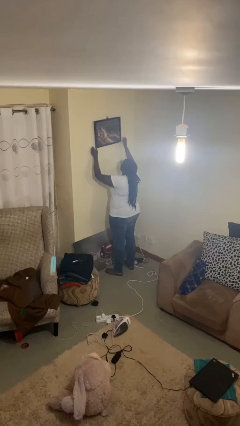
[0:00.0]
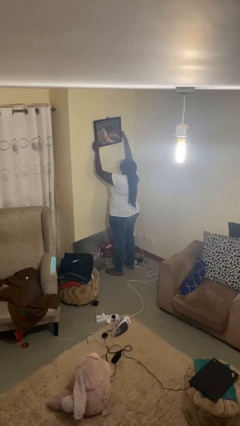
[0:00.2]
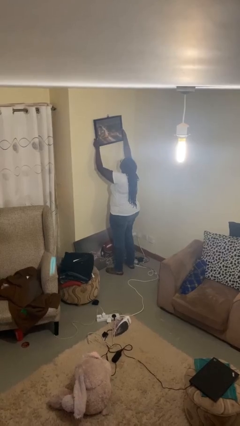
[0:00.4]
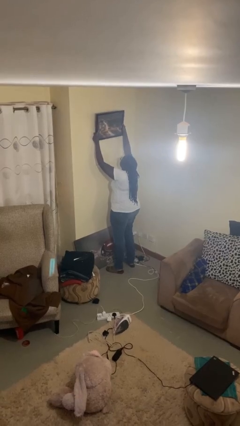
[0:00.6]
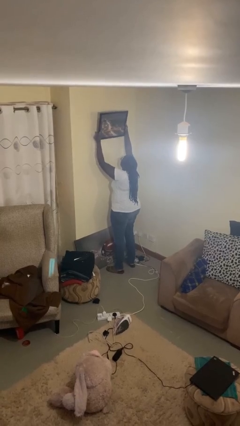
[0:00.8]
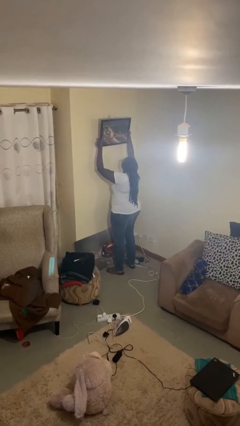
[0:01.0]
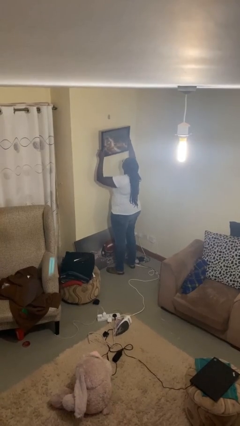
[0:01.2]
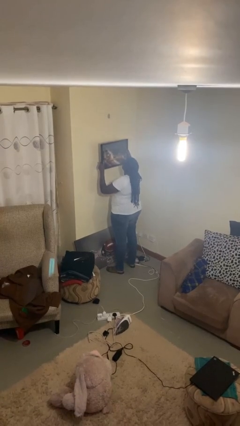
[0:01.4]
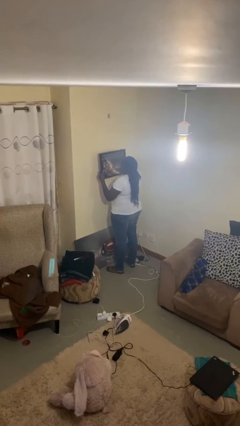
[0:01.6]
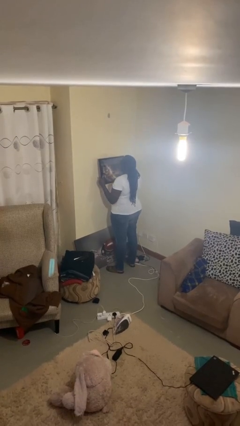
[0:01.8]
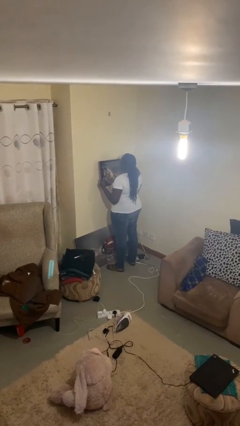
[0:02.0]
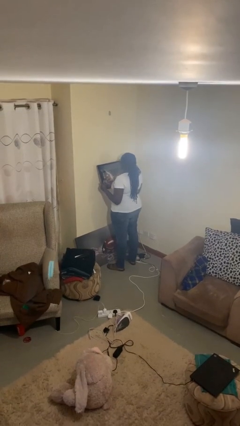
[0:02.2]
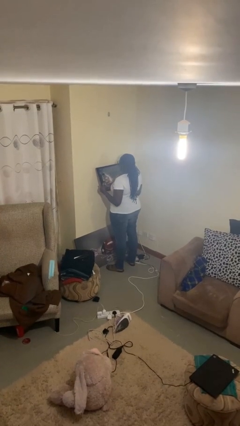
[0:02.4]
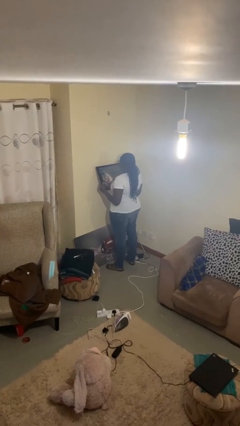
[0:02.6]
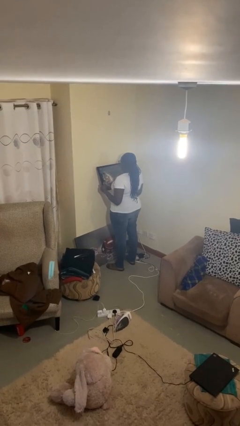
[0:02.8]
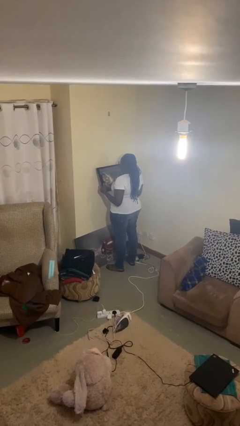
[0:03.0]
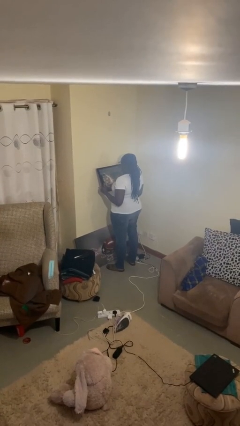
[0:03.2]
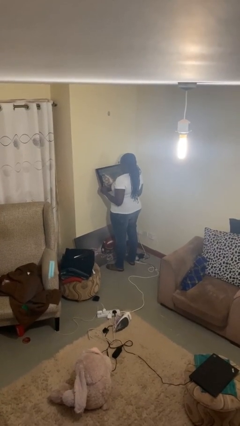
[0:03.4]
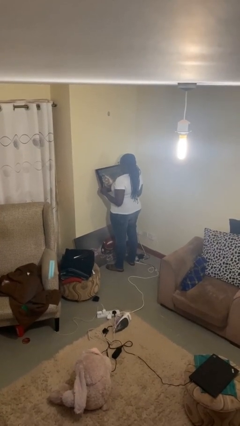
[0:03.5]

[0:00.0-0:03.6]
person takes down picture frame

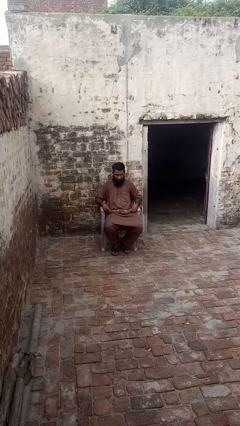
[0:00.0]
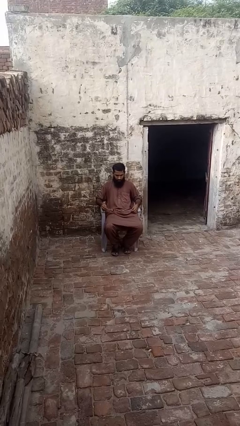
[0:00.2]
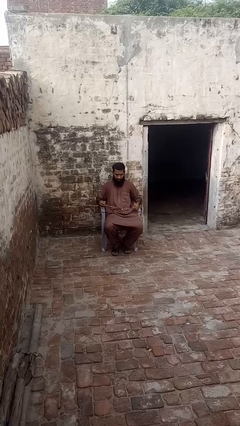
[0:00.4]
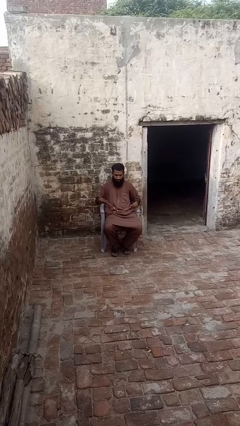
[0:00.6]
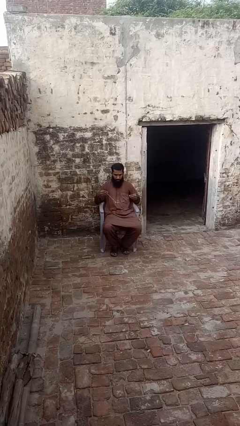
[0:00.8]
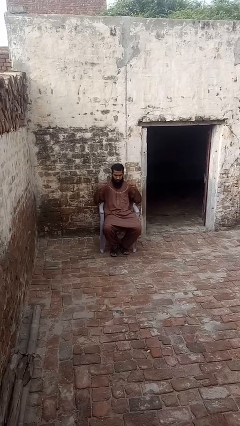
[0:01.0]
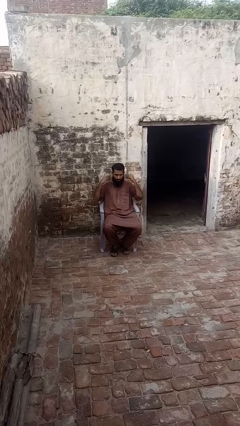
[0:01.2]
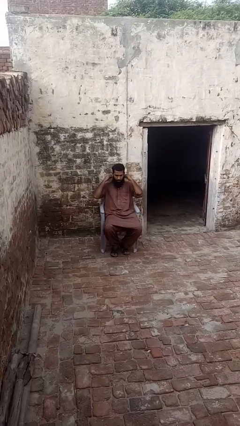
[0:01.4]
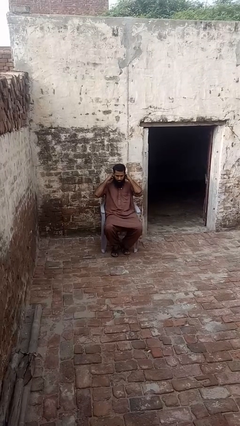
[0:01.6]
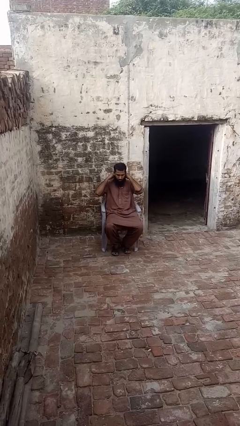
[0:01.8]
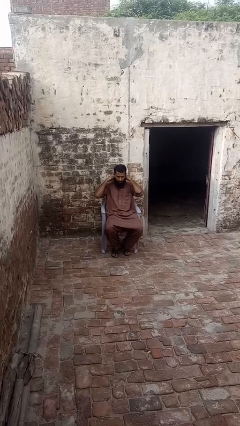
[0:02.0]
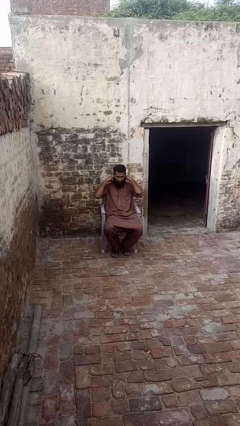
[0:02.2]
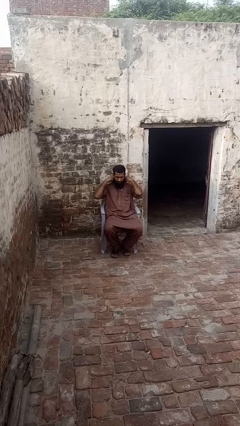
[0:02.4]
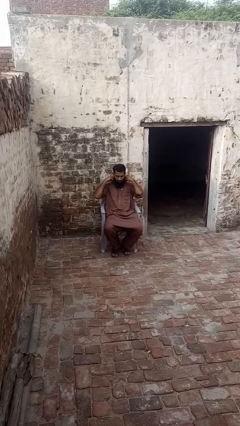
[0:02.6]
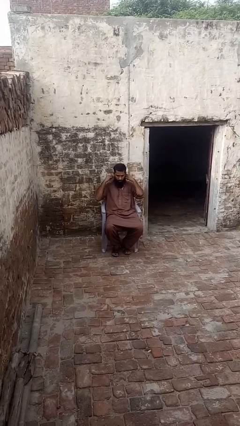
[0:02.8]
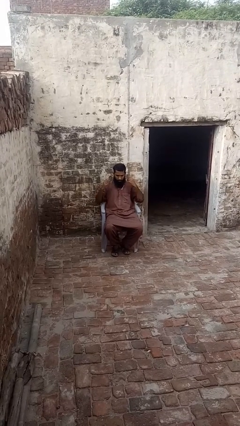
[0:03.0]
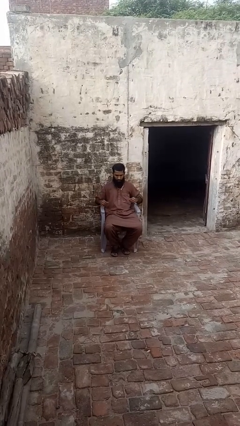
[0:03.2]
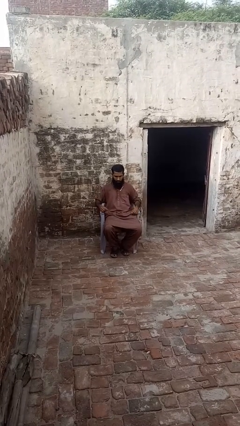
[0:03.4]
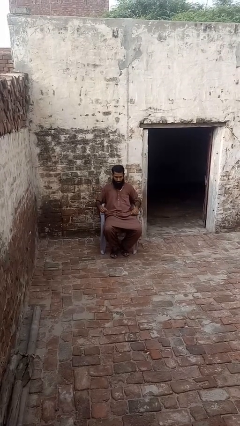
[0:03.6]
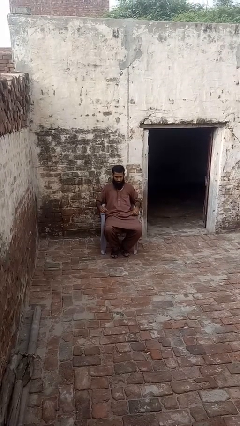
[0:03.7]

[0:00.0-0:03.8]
person puts on necklace

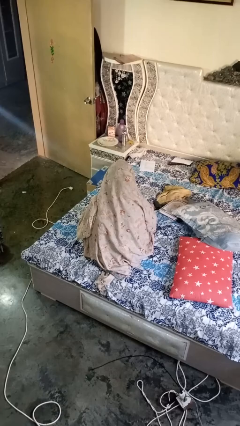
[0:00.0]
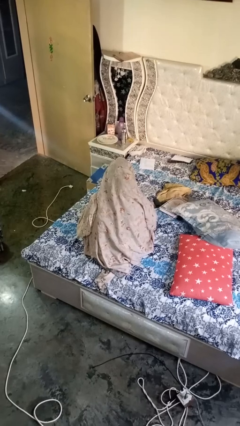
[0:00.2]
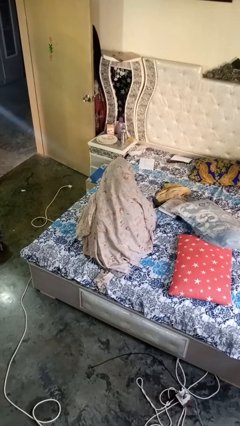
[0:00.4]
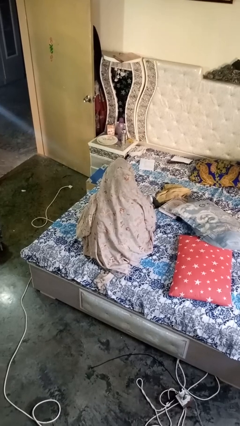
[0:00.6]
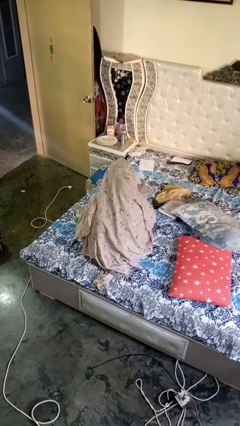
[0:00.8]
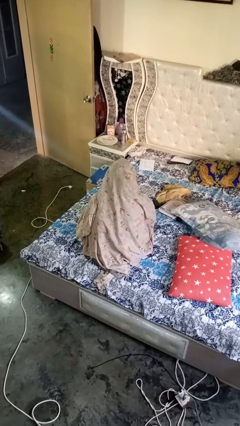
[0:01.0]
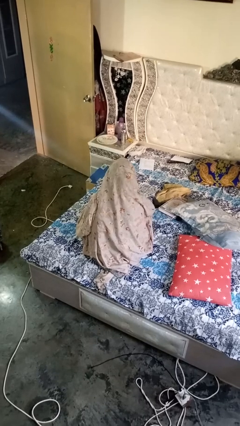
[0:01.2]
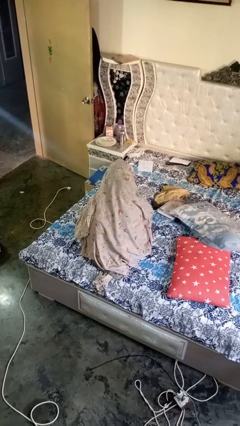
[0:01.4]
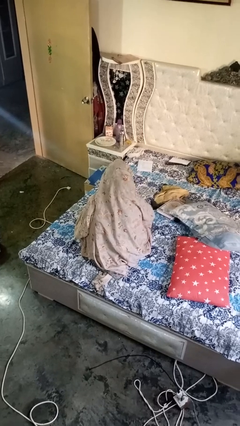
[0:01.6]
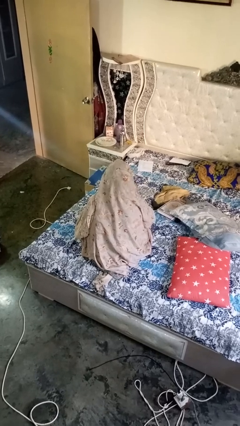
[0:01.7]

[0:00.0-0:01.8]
person wipes mouth with napkin

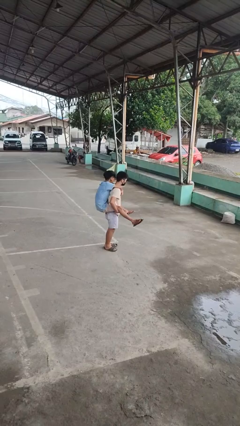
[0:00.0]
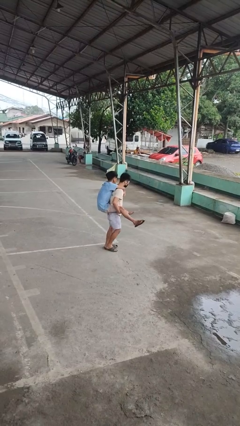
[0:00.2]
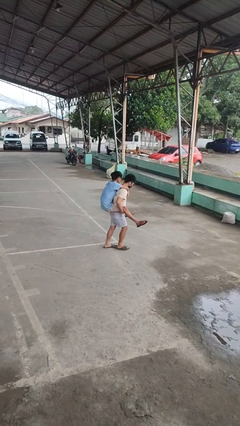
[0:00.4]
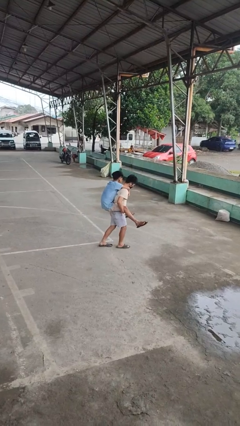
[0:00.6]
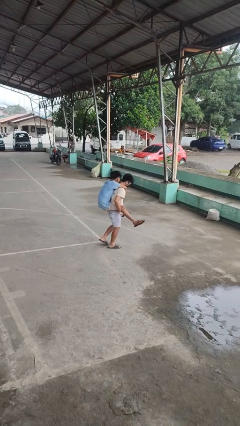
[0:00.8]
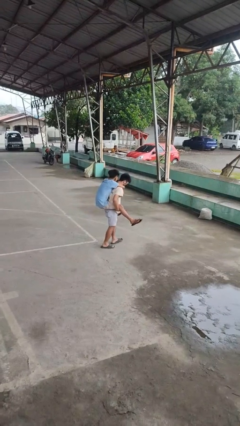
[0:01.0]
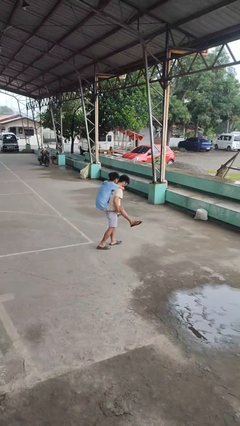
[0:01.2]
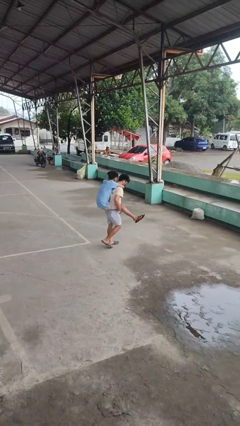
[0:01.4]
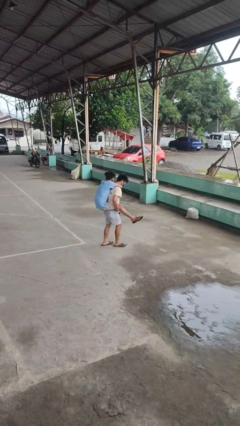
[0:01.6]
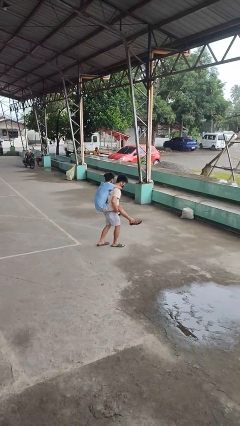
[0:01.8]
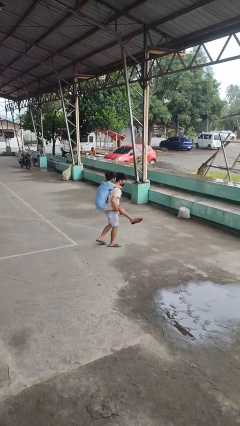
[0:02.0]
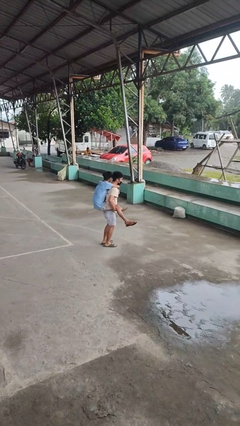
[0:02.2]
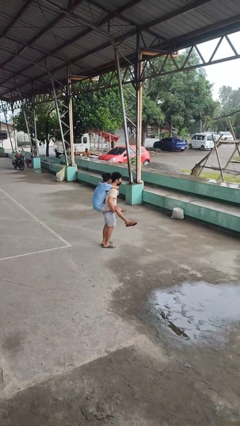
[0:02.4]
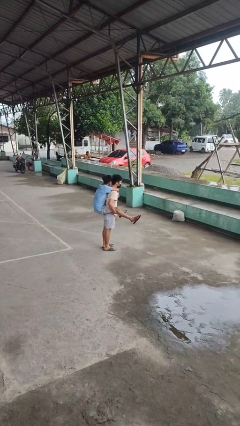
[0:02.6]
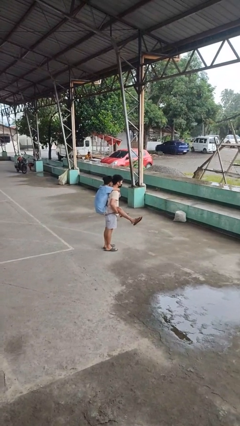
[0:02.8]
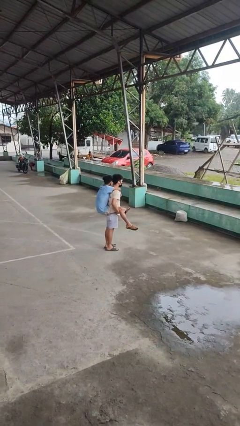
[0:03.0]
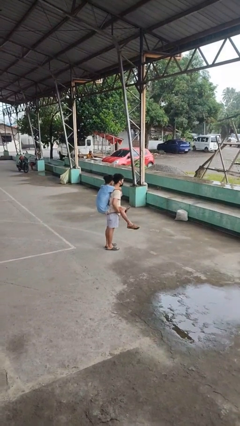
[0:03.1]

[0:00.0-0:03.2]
person carries person on back

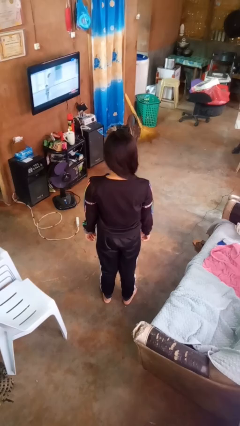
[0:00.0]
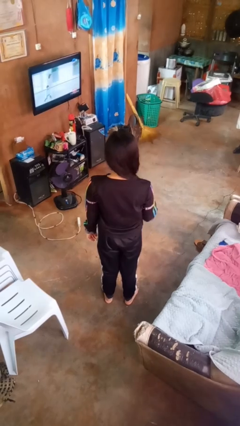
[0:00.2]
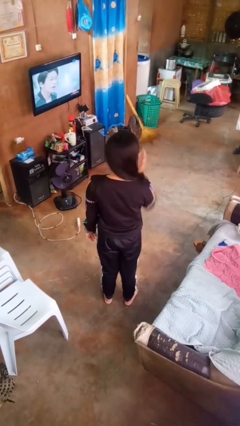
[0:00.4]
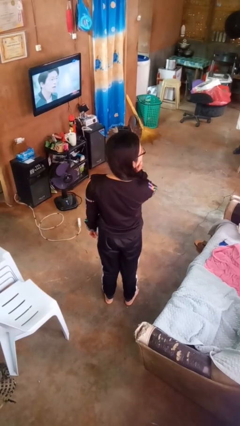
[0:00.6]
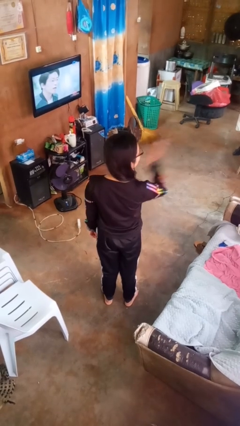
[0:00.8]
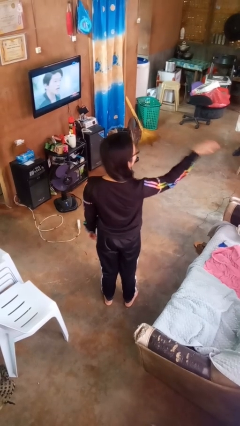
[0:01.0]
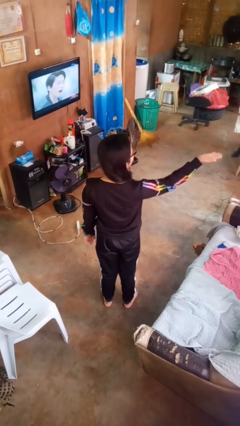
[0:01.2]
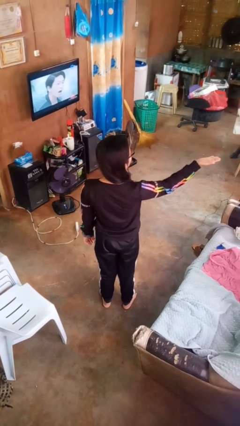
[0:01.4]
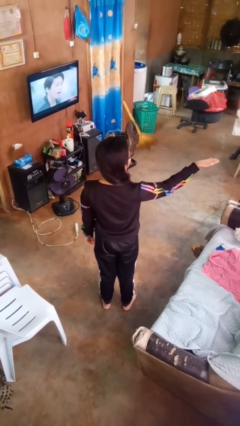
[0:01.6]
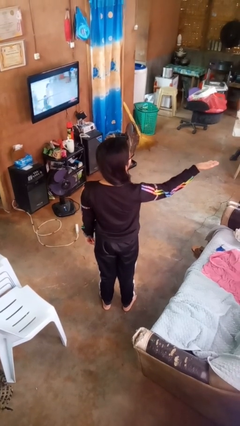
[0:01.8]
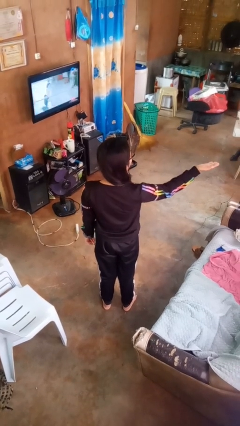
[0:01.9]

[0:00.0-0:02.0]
person gestures blow kiss

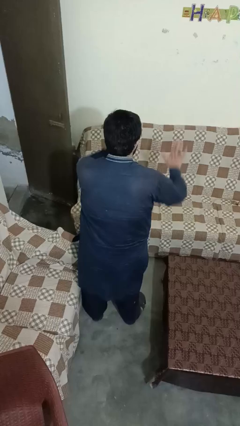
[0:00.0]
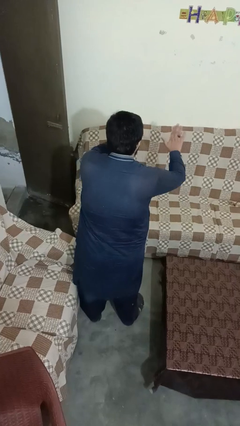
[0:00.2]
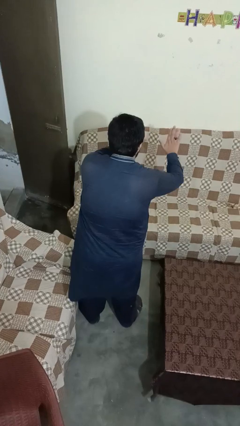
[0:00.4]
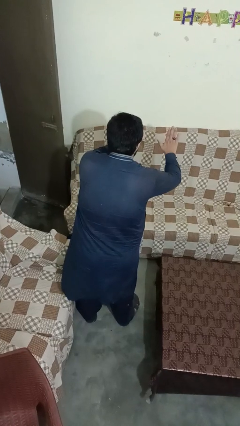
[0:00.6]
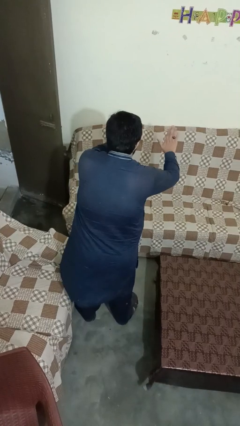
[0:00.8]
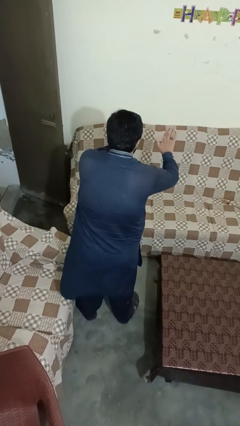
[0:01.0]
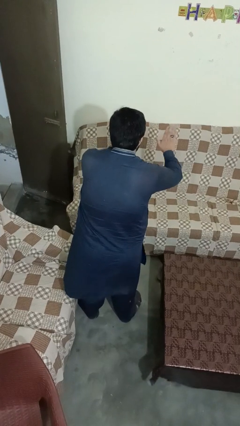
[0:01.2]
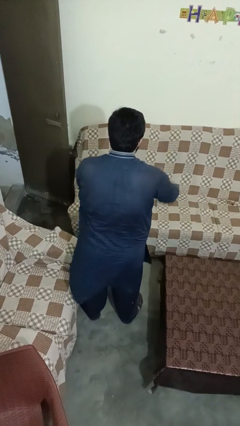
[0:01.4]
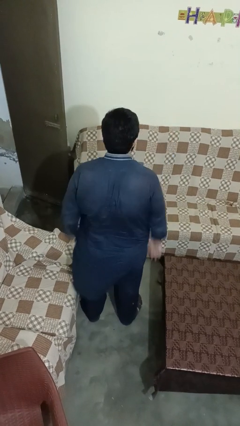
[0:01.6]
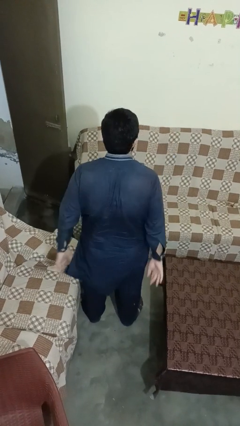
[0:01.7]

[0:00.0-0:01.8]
person gestures stop

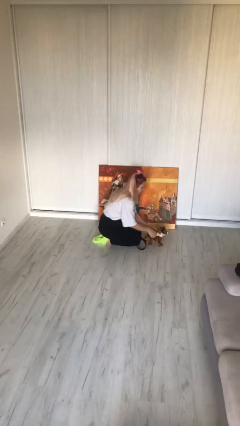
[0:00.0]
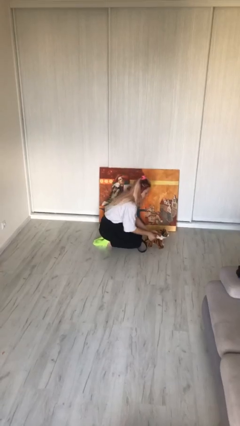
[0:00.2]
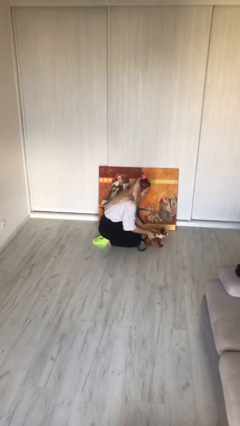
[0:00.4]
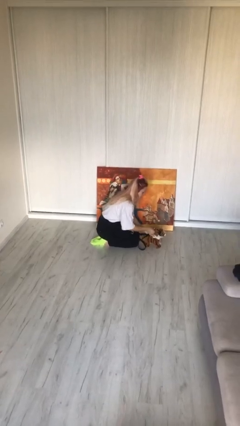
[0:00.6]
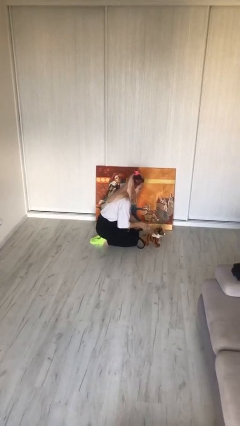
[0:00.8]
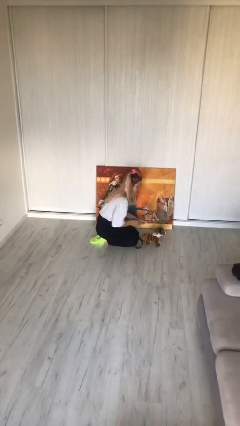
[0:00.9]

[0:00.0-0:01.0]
person unattaches leash from dog

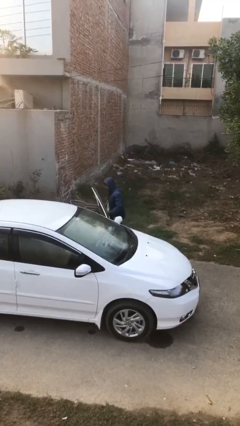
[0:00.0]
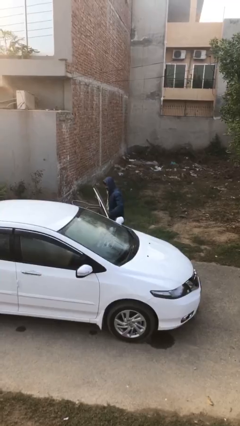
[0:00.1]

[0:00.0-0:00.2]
person closes car door
